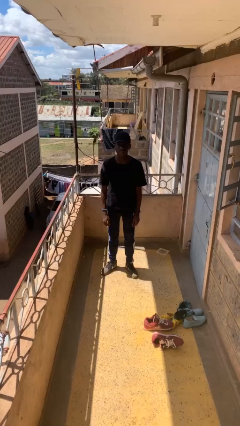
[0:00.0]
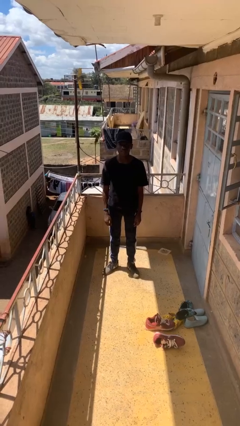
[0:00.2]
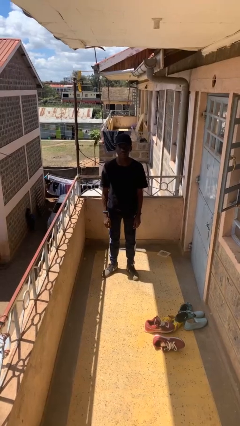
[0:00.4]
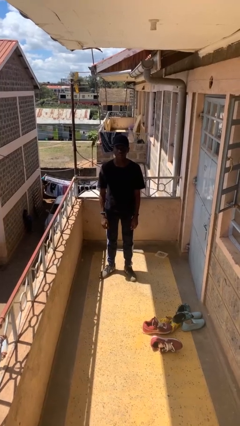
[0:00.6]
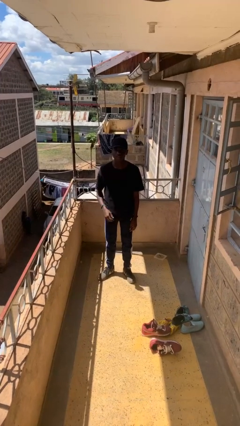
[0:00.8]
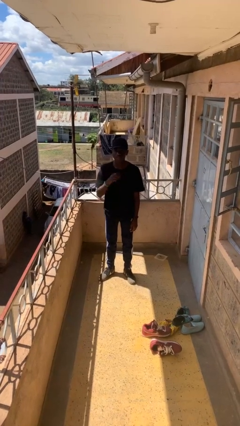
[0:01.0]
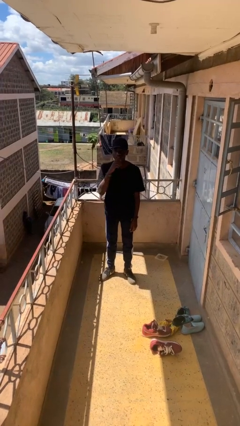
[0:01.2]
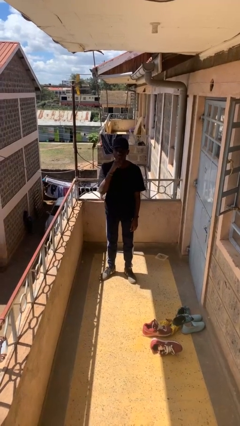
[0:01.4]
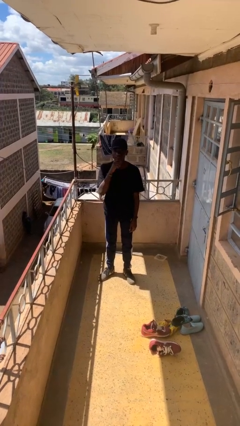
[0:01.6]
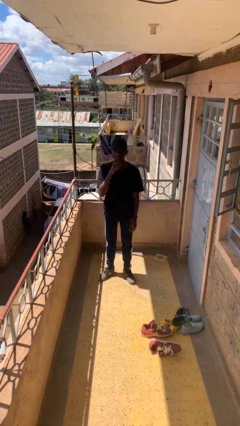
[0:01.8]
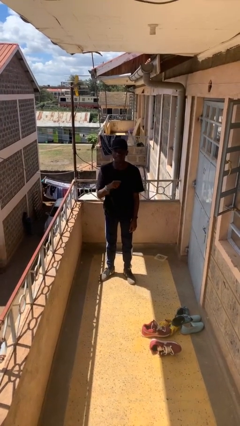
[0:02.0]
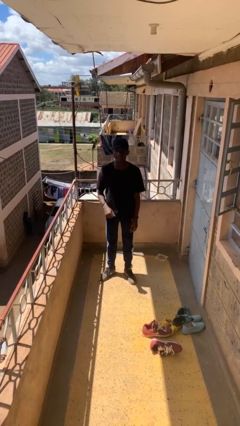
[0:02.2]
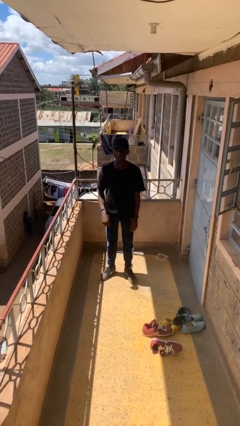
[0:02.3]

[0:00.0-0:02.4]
person strokes chin

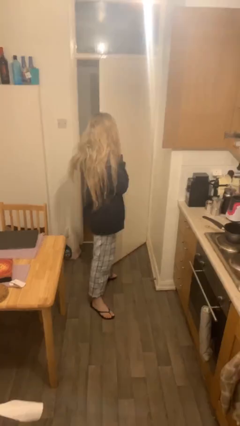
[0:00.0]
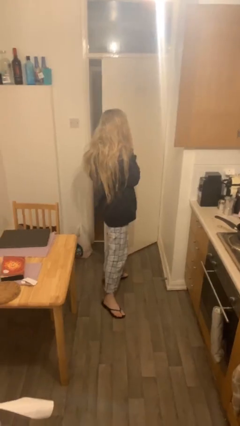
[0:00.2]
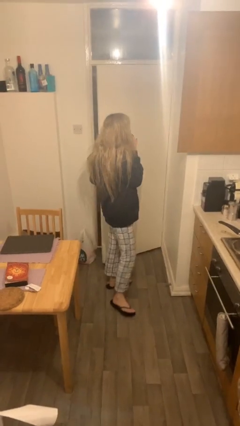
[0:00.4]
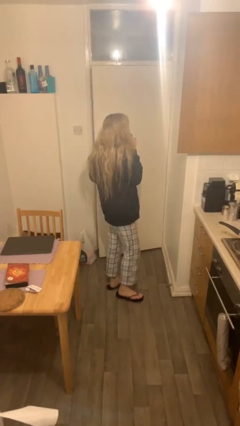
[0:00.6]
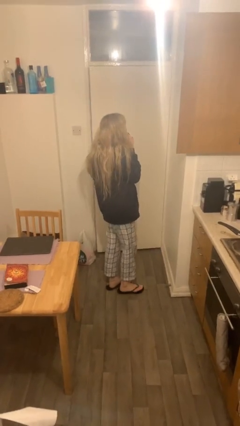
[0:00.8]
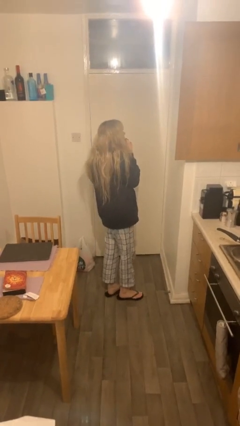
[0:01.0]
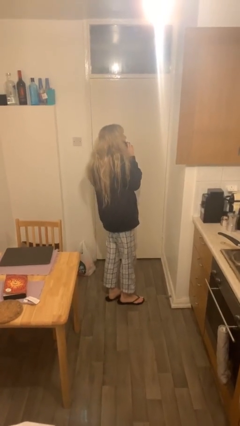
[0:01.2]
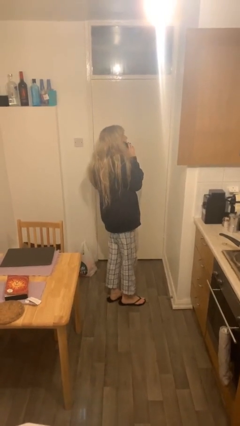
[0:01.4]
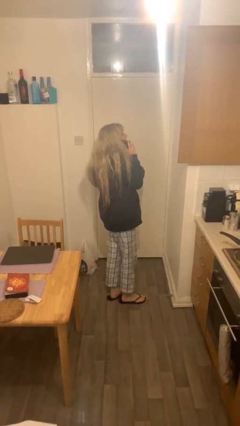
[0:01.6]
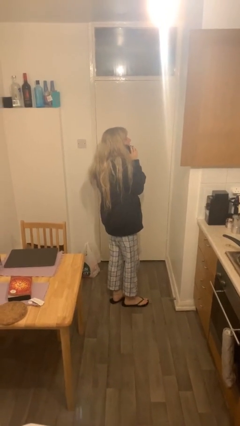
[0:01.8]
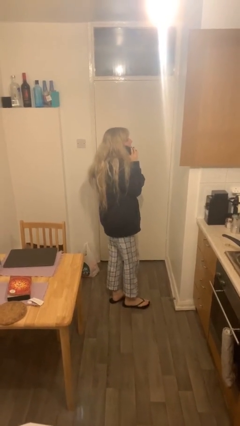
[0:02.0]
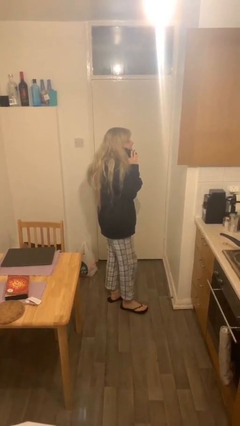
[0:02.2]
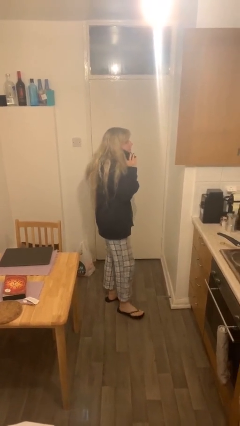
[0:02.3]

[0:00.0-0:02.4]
person closes facility door

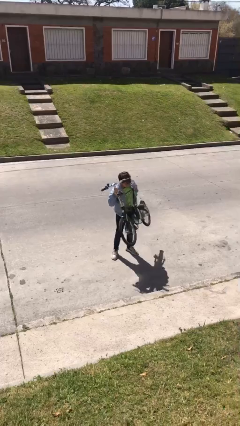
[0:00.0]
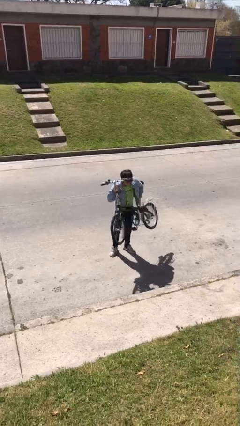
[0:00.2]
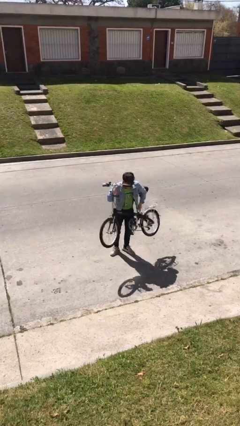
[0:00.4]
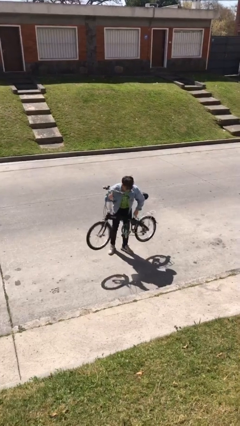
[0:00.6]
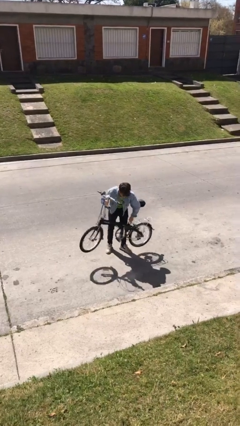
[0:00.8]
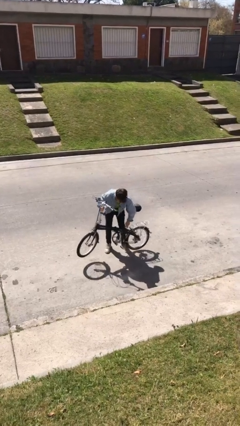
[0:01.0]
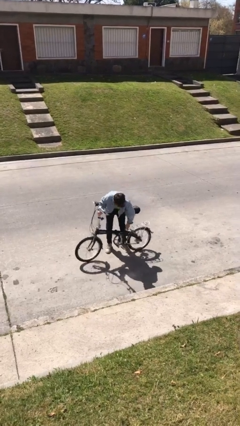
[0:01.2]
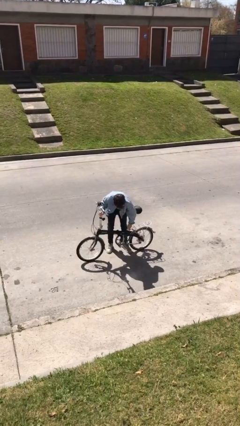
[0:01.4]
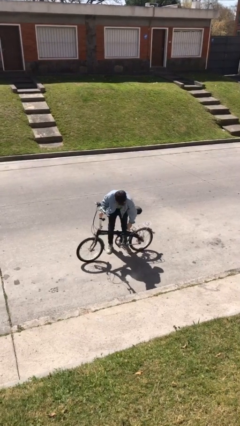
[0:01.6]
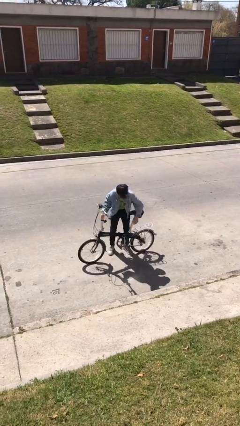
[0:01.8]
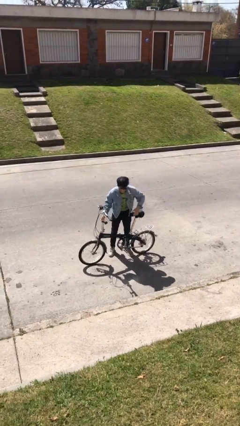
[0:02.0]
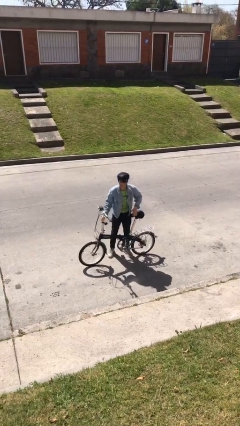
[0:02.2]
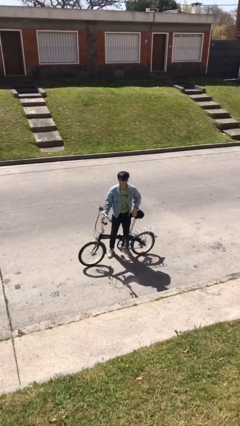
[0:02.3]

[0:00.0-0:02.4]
person puts down object on floor

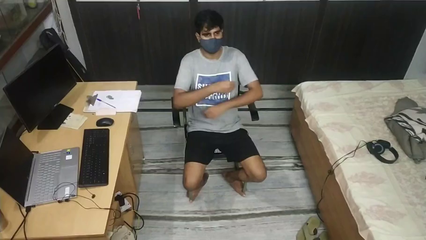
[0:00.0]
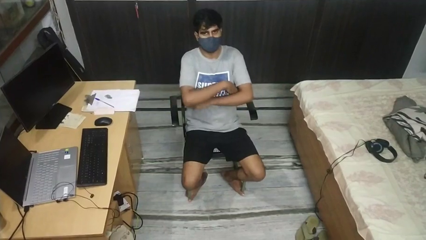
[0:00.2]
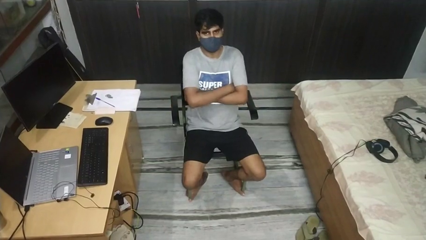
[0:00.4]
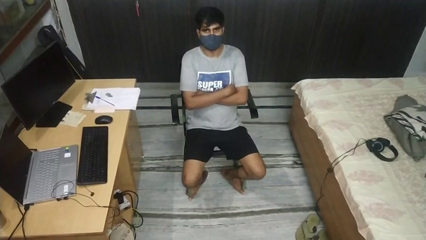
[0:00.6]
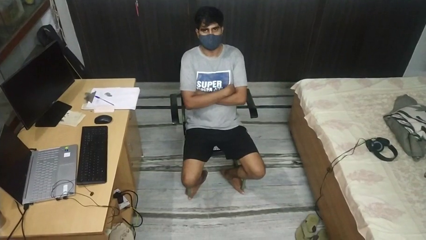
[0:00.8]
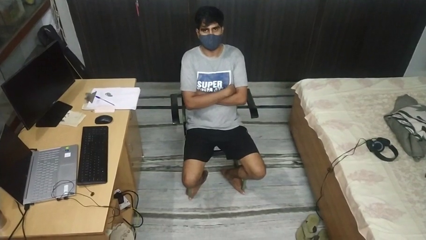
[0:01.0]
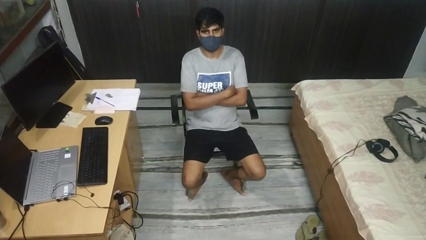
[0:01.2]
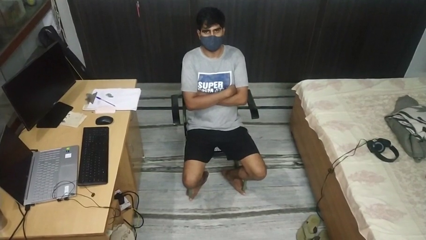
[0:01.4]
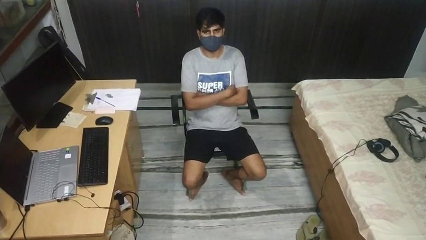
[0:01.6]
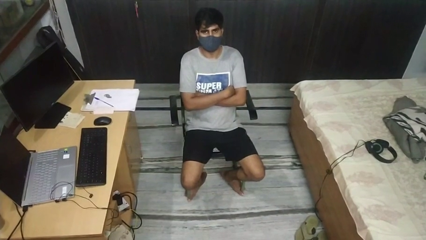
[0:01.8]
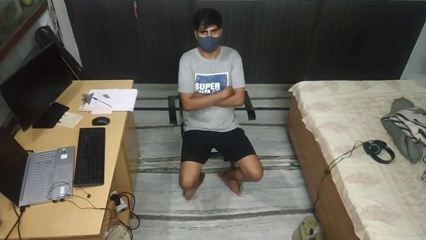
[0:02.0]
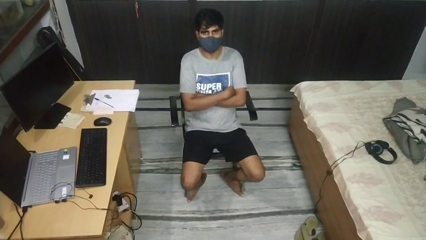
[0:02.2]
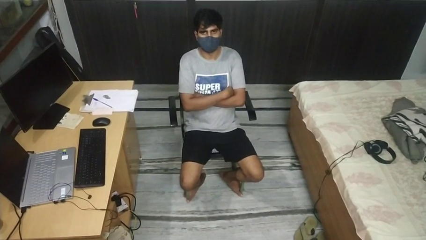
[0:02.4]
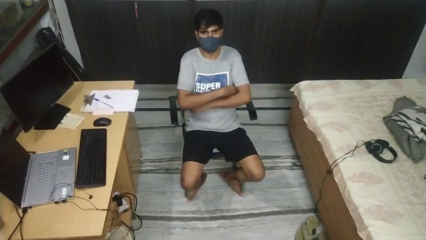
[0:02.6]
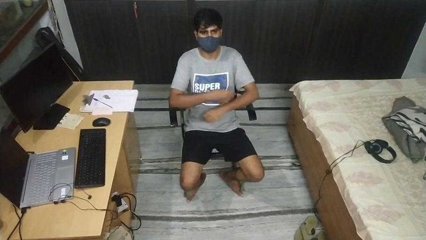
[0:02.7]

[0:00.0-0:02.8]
person crosses arms

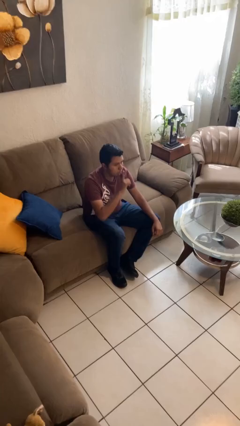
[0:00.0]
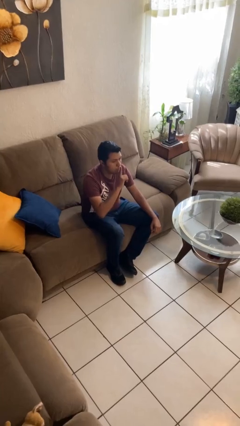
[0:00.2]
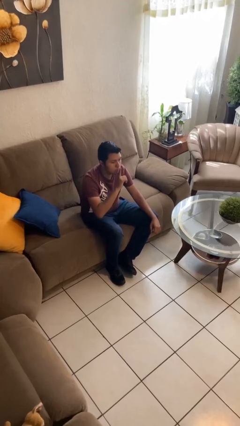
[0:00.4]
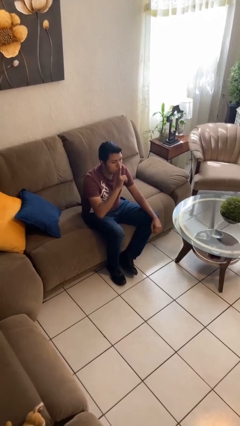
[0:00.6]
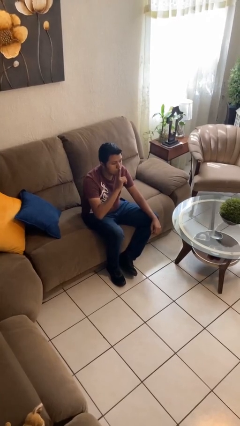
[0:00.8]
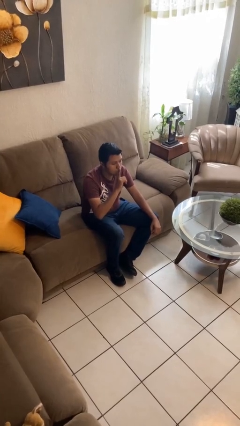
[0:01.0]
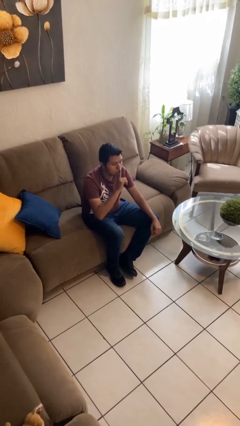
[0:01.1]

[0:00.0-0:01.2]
person gestures be quiet

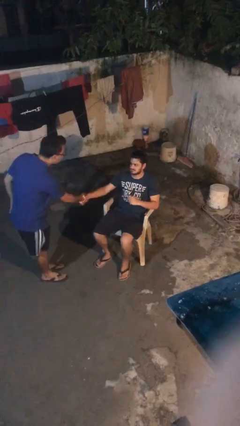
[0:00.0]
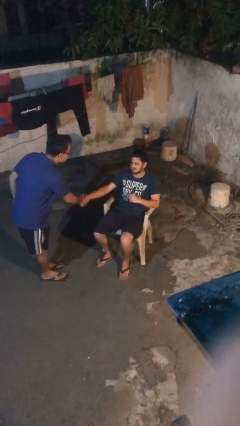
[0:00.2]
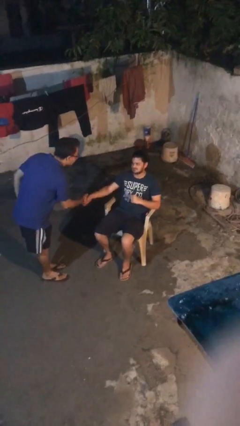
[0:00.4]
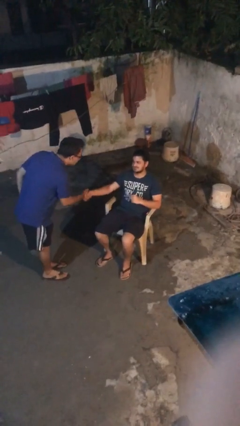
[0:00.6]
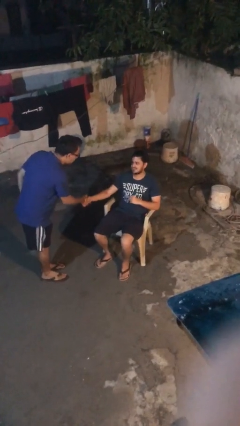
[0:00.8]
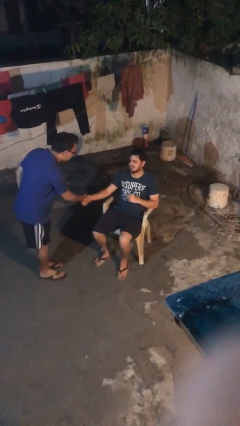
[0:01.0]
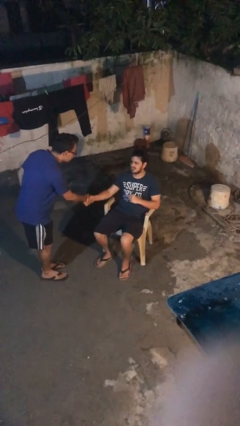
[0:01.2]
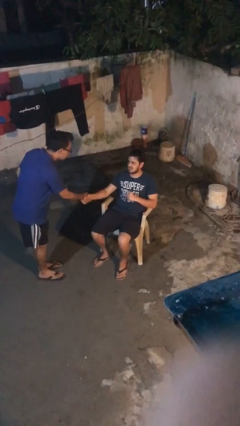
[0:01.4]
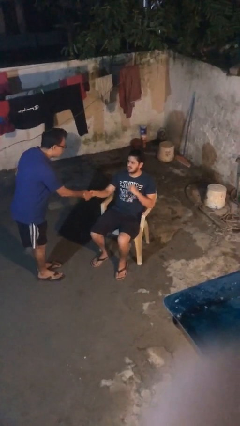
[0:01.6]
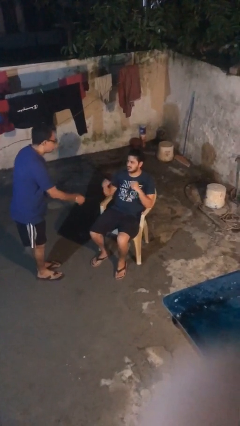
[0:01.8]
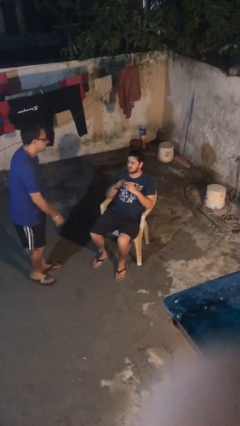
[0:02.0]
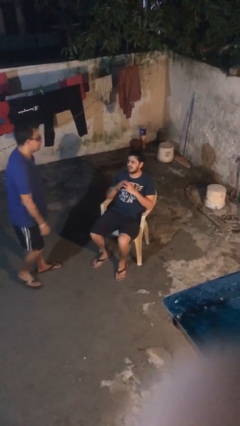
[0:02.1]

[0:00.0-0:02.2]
person shakes hand

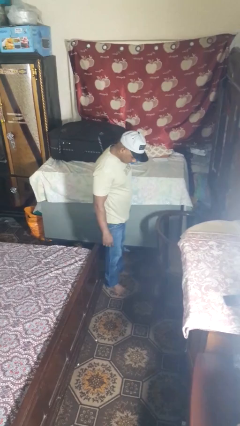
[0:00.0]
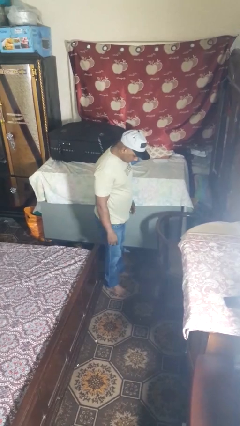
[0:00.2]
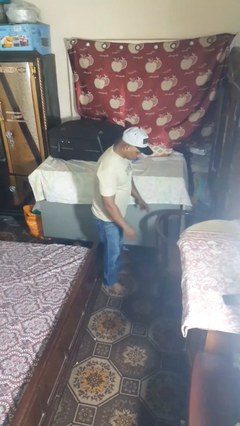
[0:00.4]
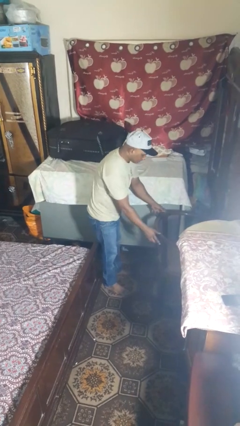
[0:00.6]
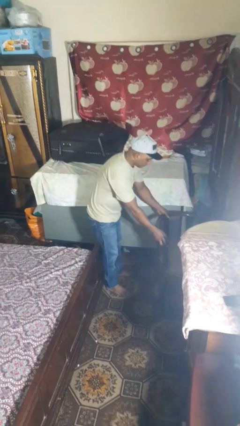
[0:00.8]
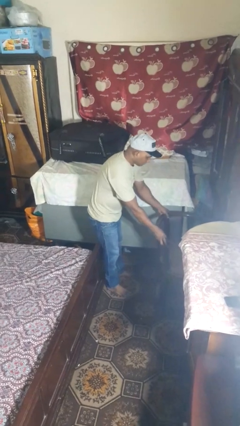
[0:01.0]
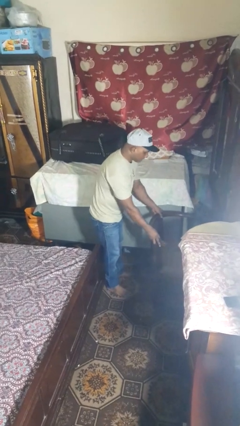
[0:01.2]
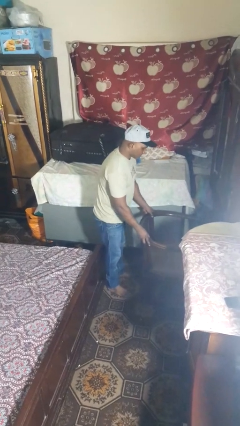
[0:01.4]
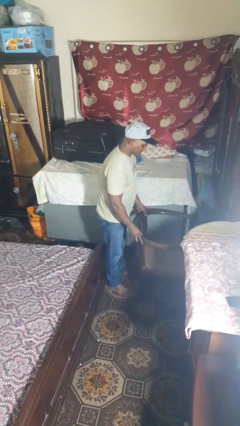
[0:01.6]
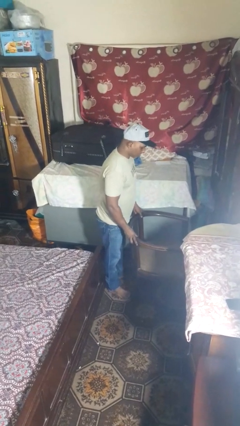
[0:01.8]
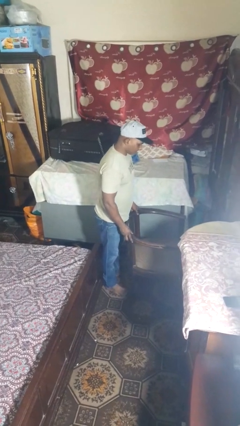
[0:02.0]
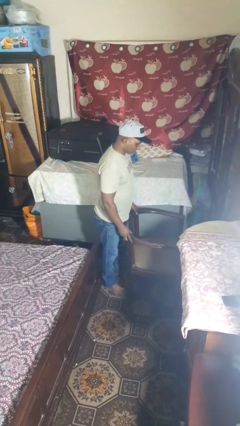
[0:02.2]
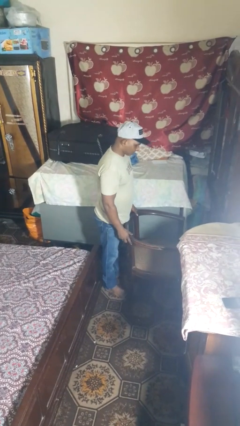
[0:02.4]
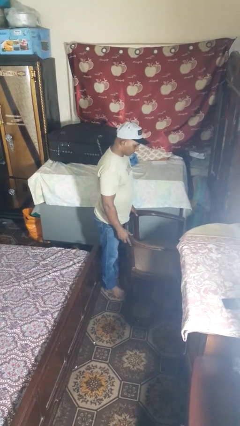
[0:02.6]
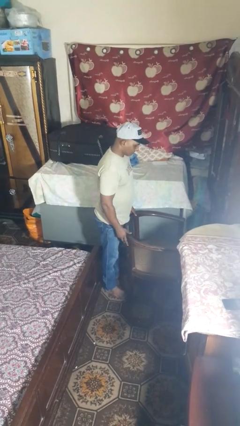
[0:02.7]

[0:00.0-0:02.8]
person pulls out chair

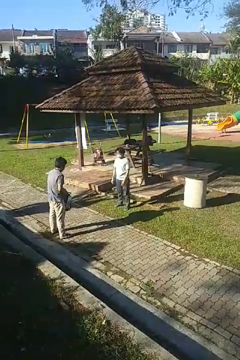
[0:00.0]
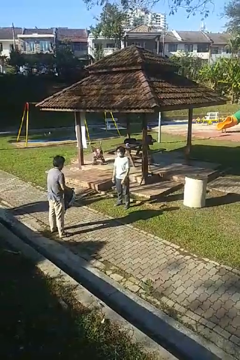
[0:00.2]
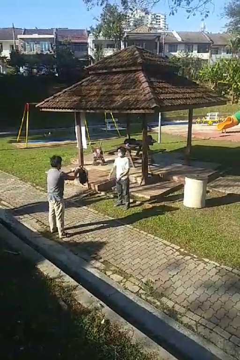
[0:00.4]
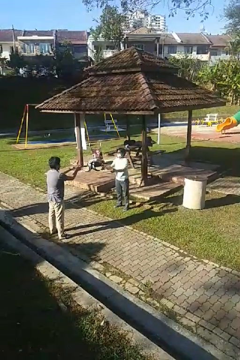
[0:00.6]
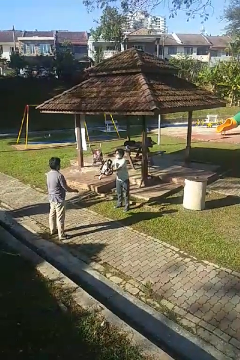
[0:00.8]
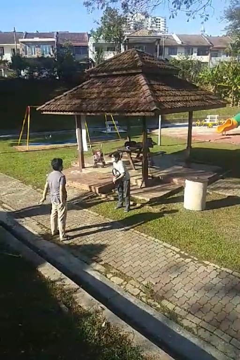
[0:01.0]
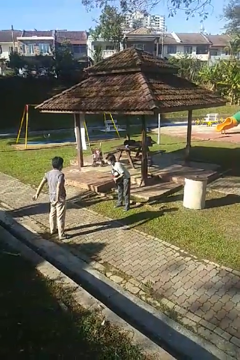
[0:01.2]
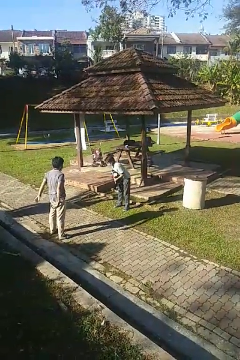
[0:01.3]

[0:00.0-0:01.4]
person catches object from person
